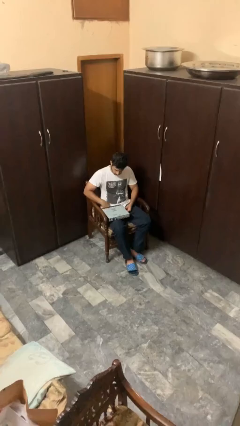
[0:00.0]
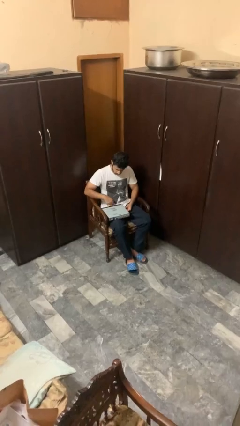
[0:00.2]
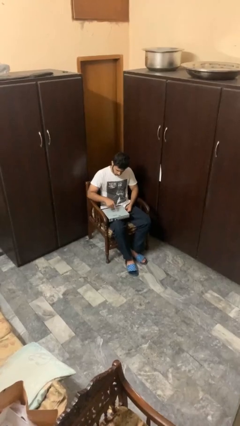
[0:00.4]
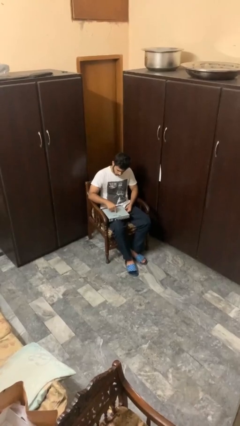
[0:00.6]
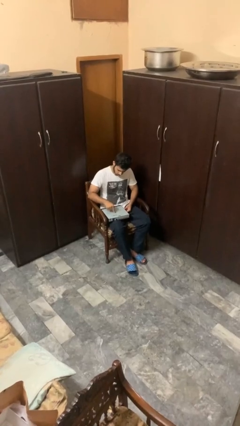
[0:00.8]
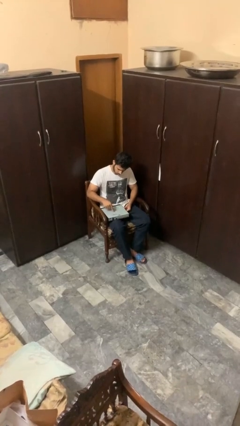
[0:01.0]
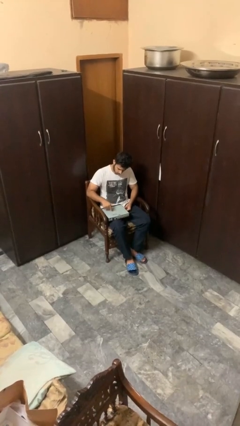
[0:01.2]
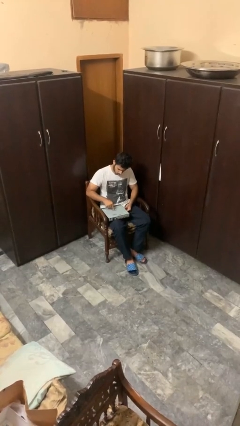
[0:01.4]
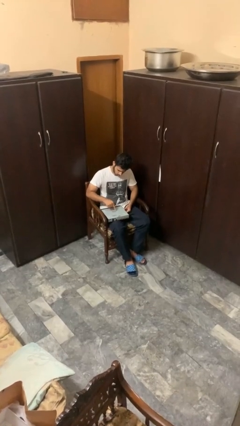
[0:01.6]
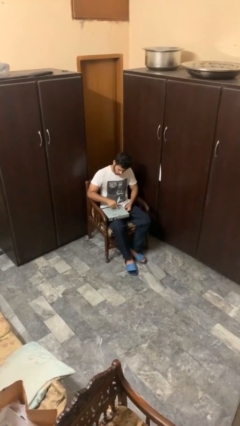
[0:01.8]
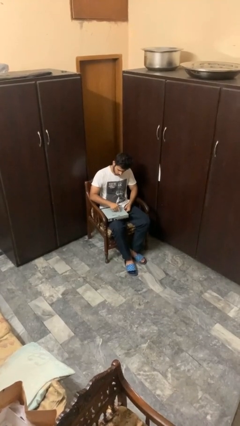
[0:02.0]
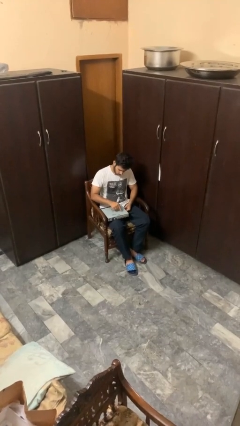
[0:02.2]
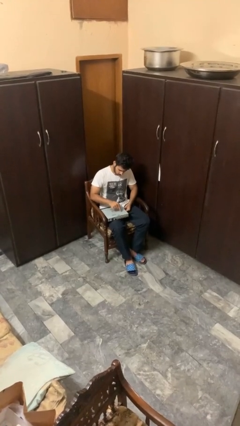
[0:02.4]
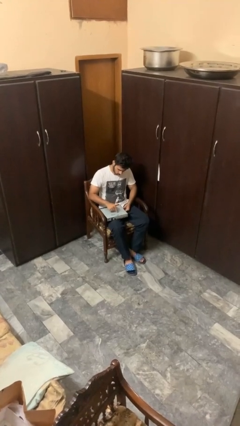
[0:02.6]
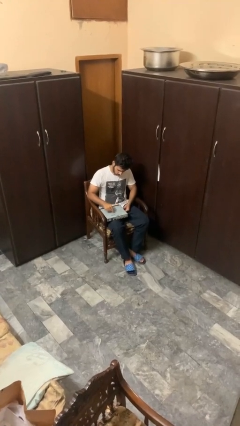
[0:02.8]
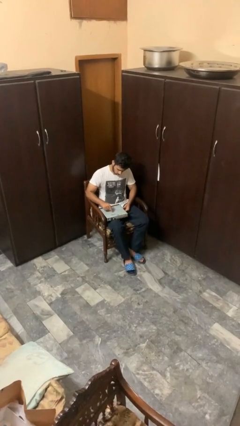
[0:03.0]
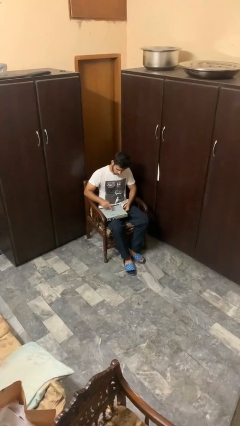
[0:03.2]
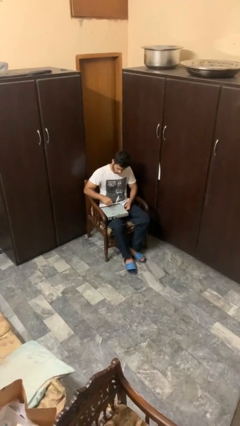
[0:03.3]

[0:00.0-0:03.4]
person taps object with finger

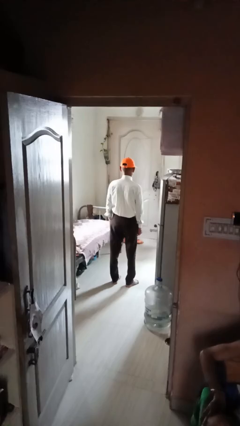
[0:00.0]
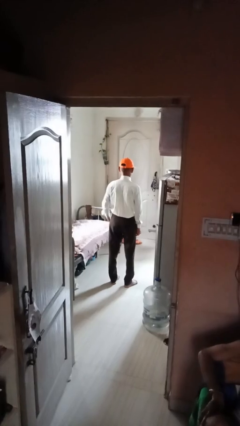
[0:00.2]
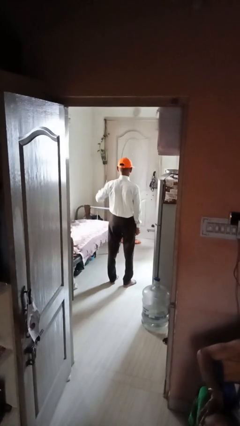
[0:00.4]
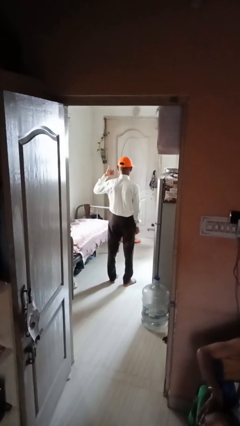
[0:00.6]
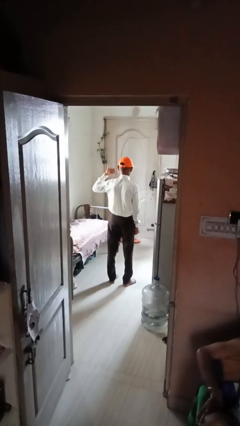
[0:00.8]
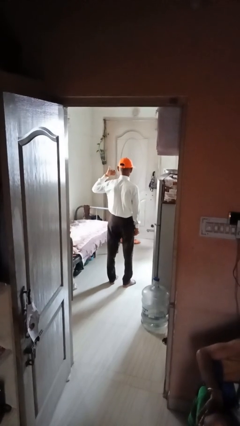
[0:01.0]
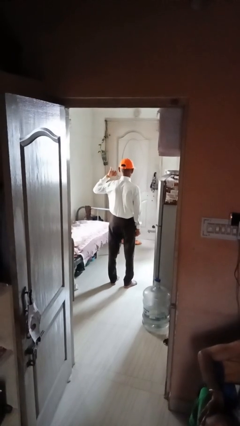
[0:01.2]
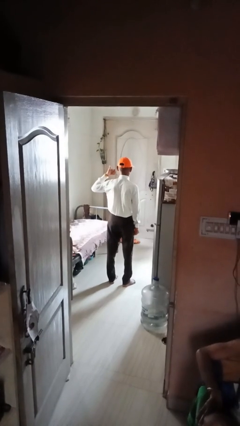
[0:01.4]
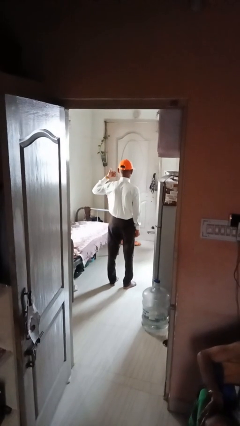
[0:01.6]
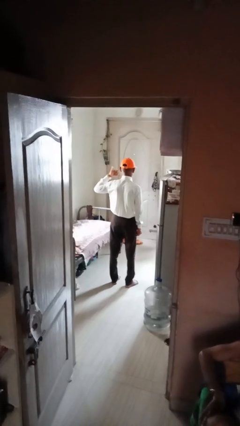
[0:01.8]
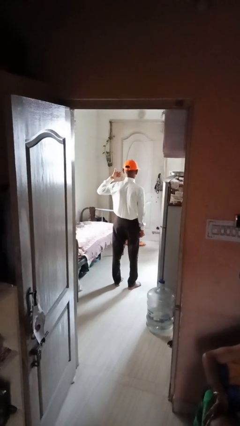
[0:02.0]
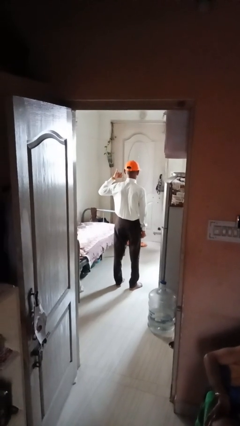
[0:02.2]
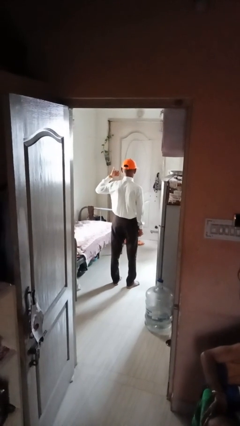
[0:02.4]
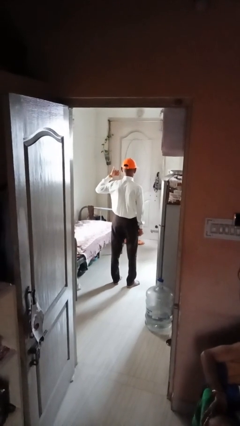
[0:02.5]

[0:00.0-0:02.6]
person gestures call me

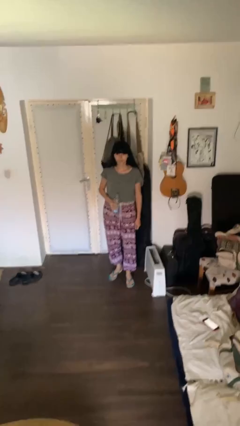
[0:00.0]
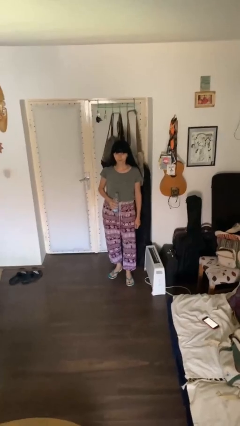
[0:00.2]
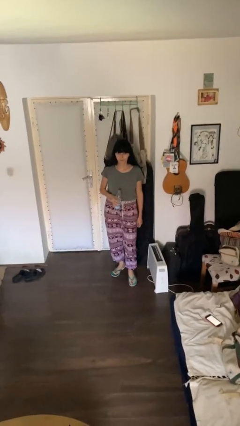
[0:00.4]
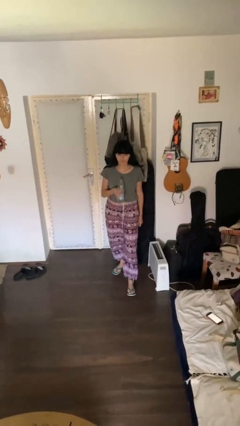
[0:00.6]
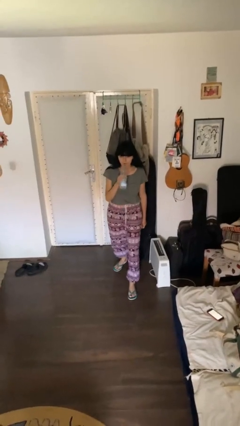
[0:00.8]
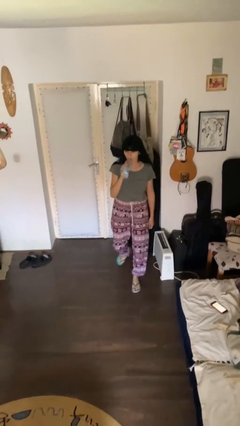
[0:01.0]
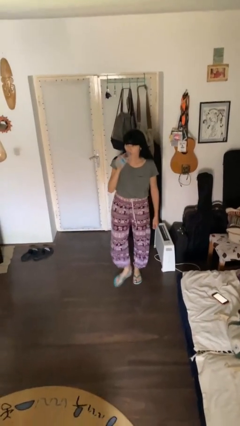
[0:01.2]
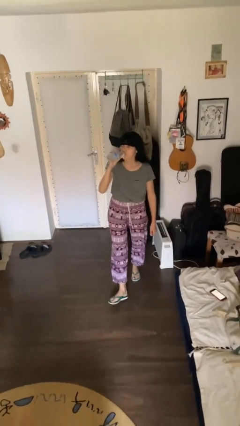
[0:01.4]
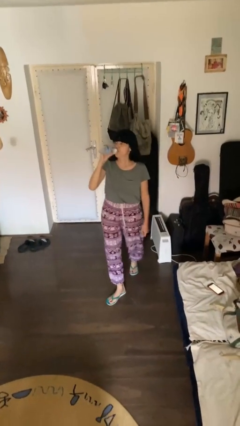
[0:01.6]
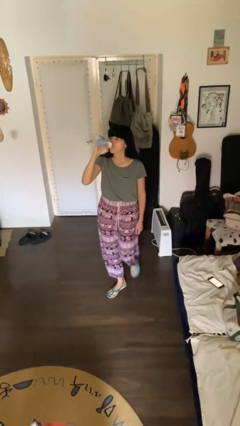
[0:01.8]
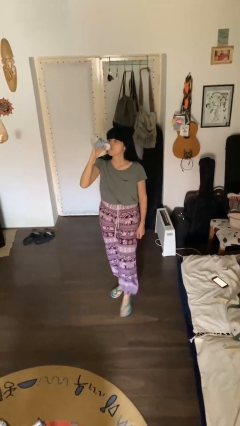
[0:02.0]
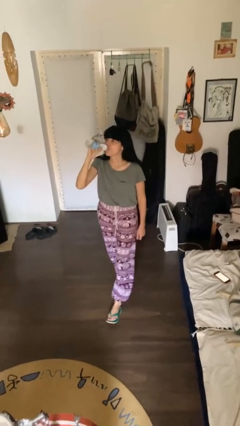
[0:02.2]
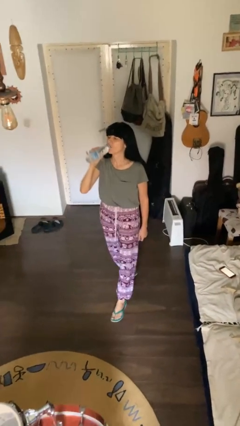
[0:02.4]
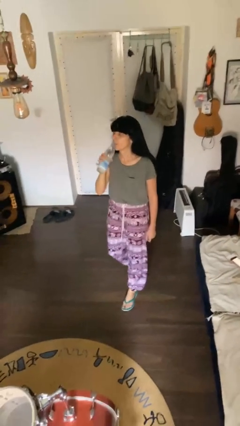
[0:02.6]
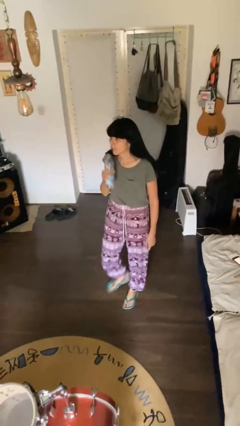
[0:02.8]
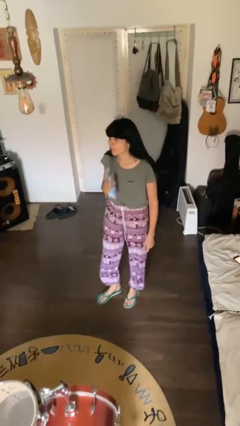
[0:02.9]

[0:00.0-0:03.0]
person drinks from bottle

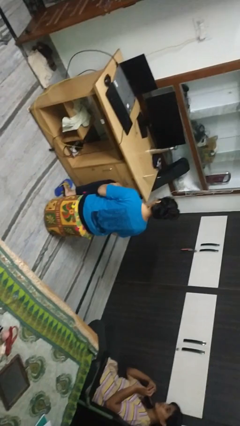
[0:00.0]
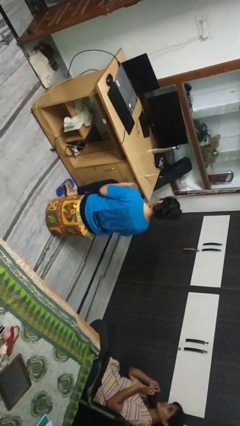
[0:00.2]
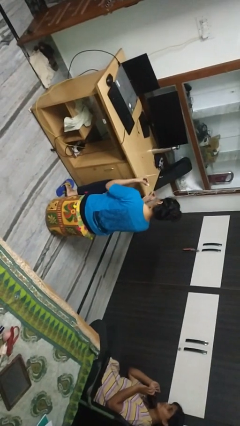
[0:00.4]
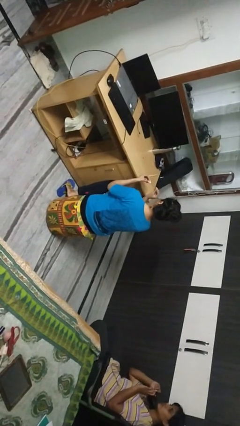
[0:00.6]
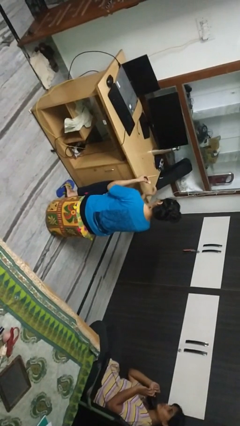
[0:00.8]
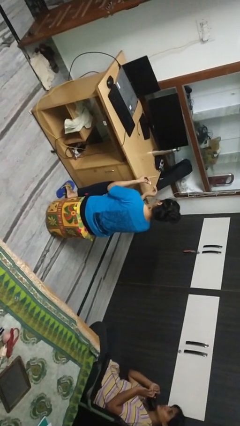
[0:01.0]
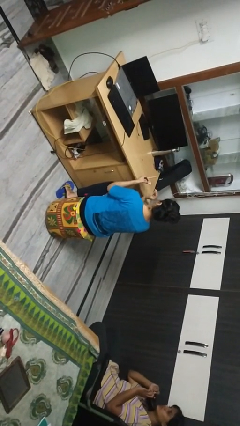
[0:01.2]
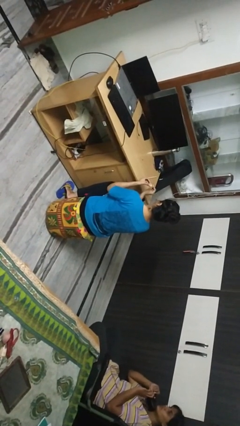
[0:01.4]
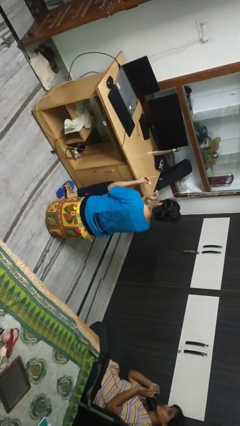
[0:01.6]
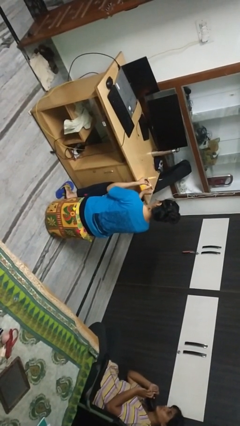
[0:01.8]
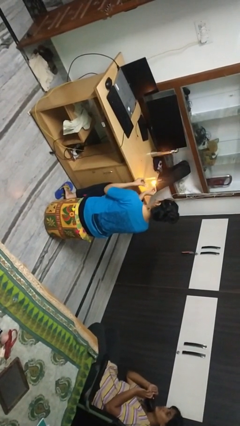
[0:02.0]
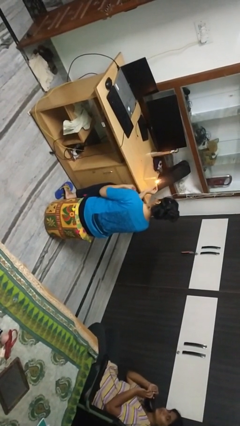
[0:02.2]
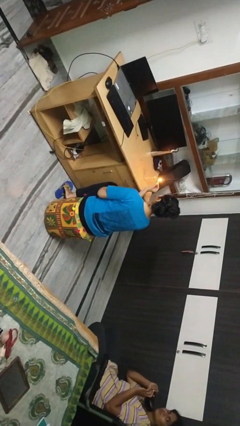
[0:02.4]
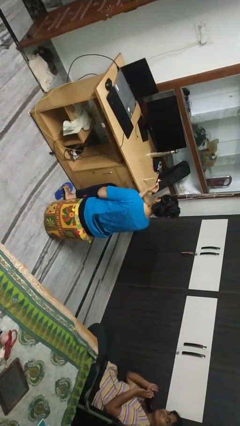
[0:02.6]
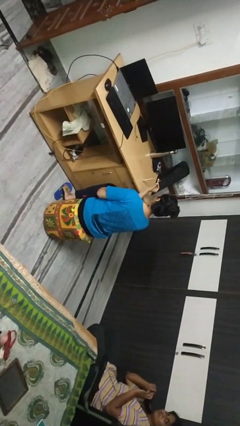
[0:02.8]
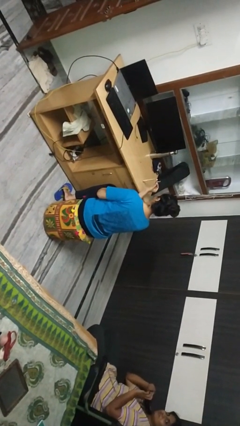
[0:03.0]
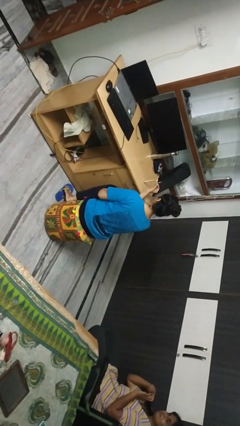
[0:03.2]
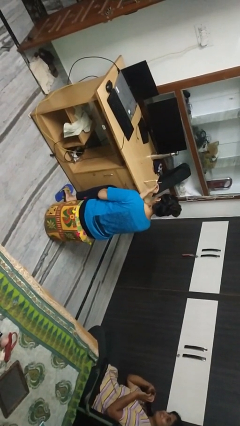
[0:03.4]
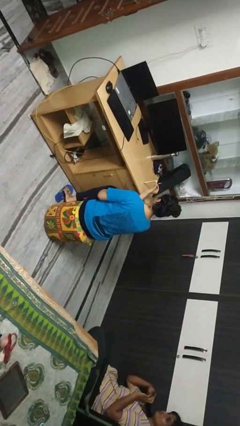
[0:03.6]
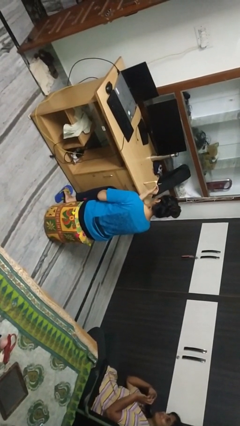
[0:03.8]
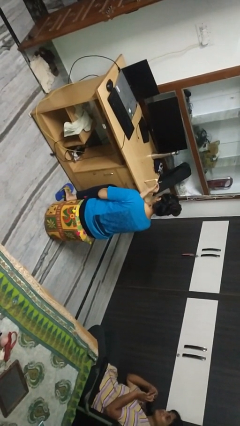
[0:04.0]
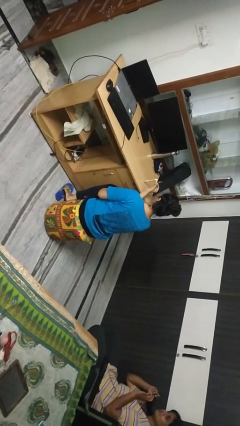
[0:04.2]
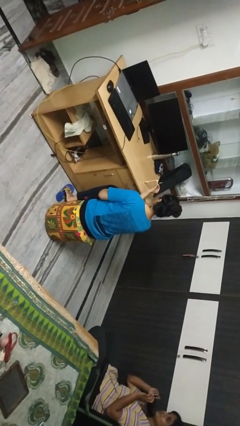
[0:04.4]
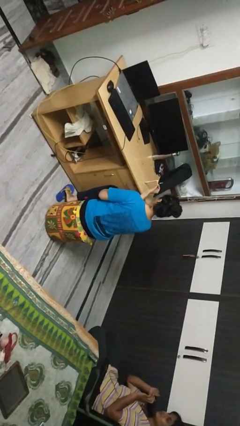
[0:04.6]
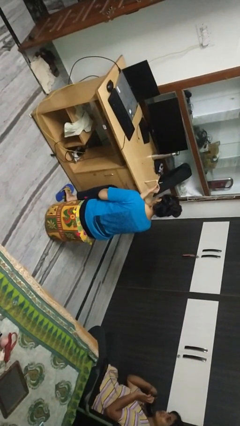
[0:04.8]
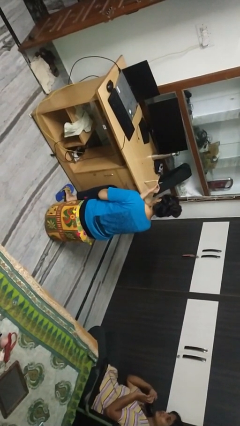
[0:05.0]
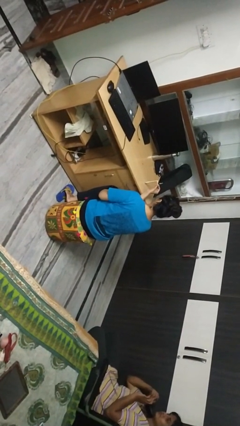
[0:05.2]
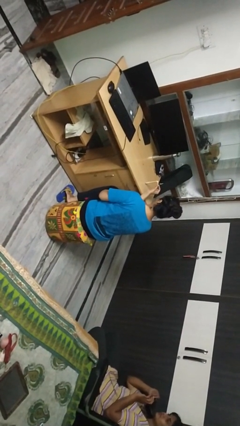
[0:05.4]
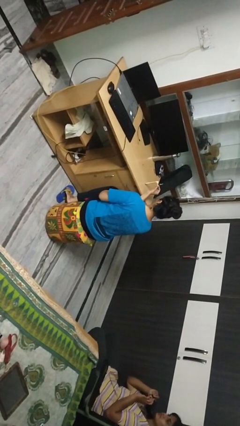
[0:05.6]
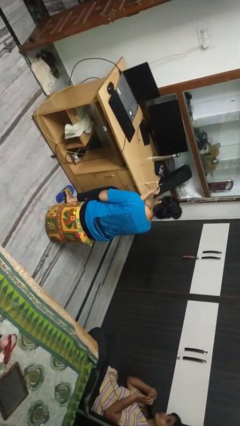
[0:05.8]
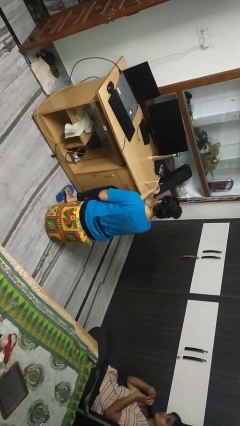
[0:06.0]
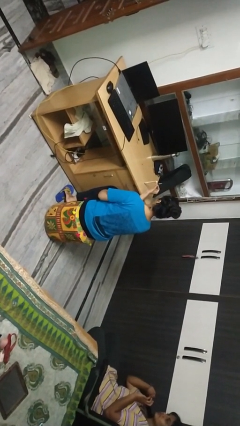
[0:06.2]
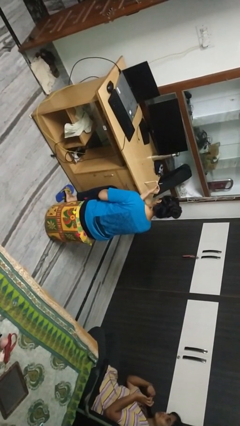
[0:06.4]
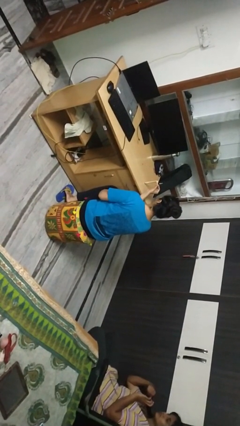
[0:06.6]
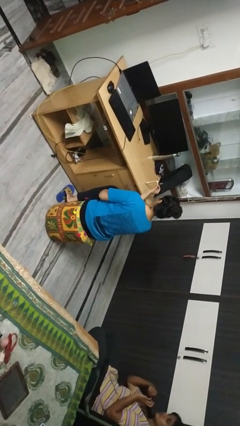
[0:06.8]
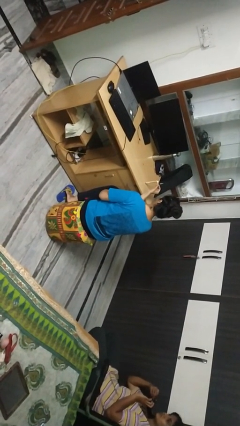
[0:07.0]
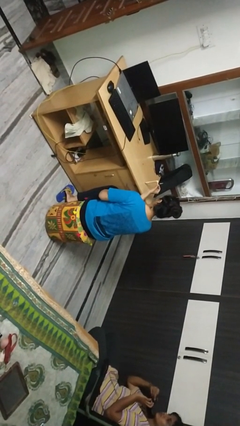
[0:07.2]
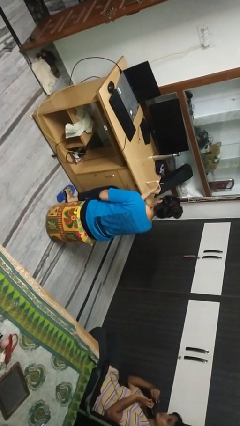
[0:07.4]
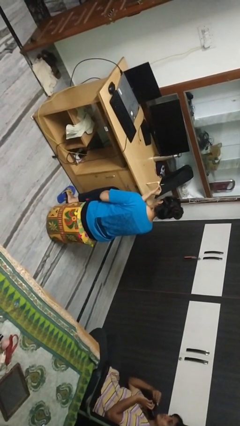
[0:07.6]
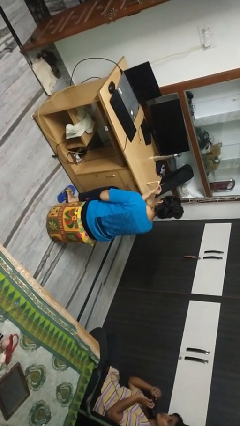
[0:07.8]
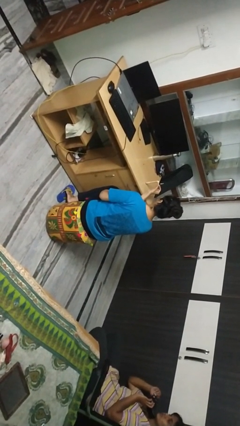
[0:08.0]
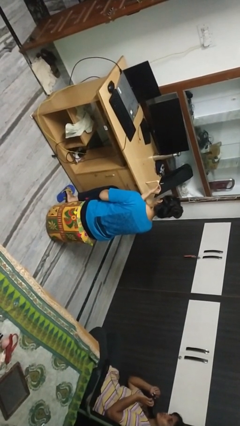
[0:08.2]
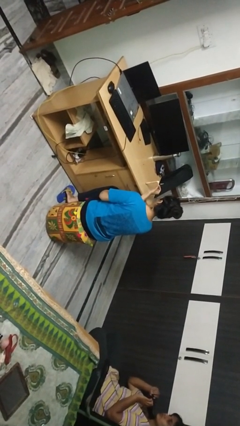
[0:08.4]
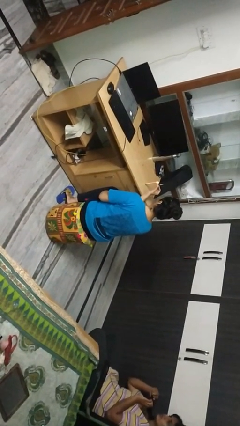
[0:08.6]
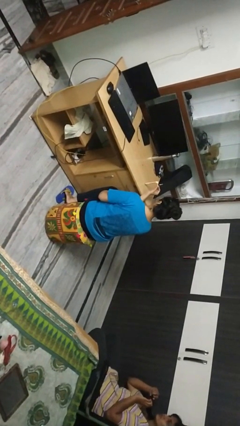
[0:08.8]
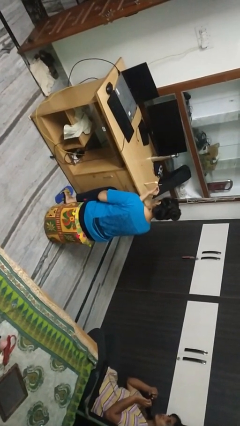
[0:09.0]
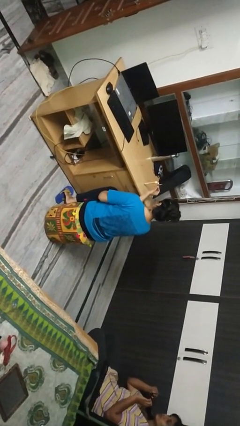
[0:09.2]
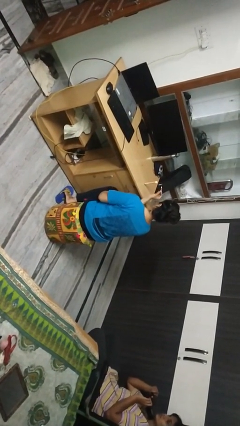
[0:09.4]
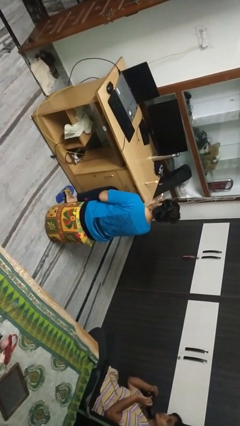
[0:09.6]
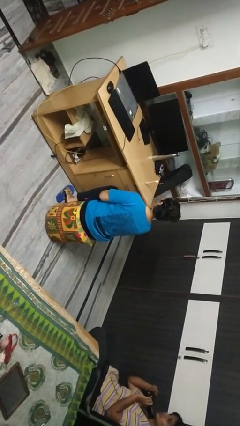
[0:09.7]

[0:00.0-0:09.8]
person lights candle
